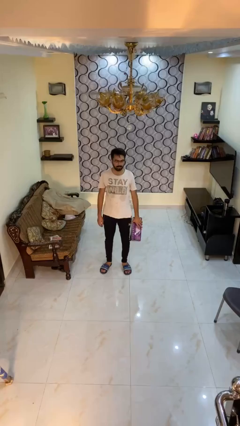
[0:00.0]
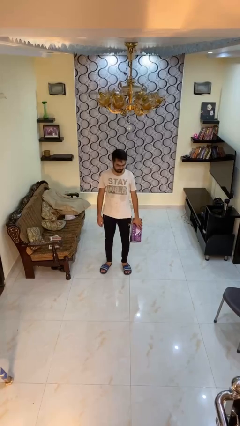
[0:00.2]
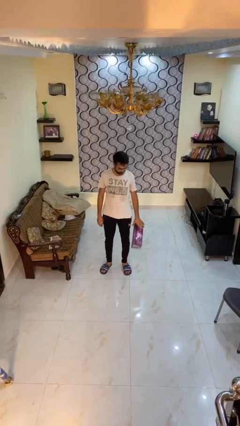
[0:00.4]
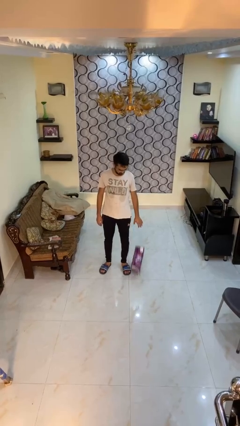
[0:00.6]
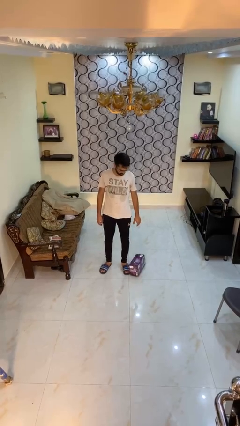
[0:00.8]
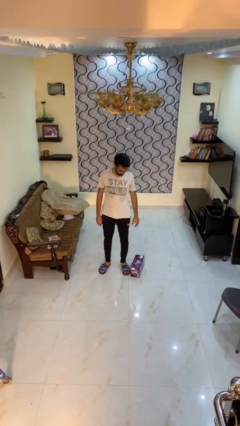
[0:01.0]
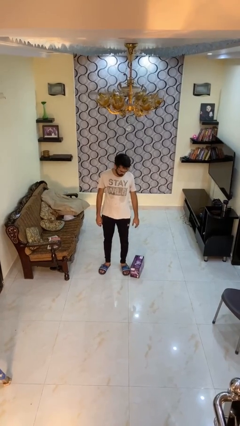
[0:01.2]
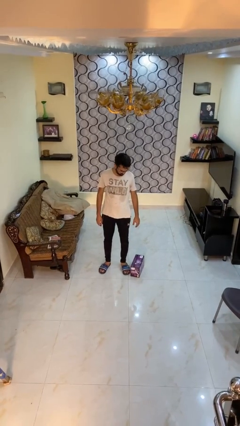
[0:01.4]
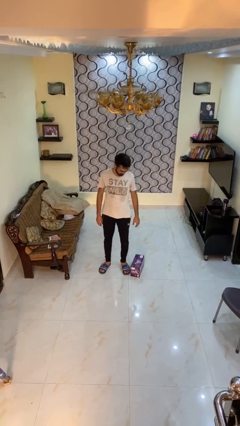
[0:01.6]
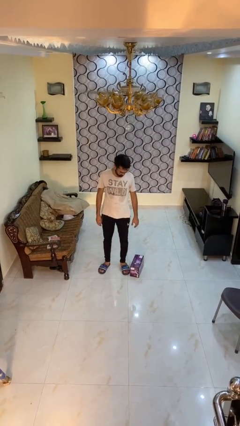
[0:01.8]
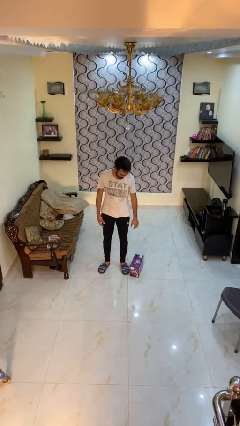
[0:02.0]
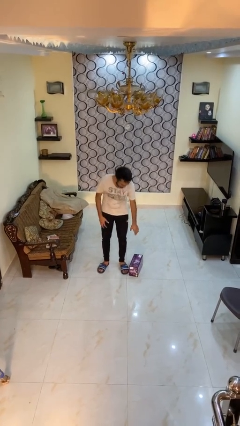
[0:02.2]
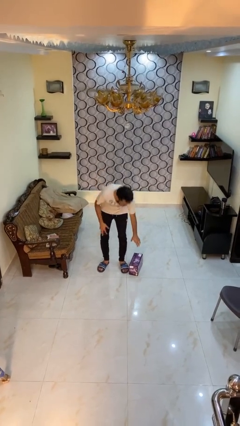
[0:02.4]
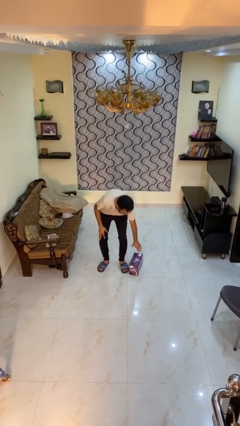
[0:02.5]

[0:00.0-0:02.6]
person drops object

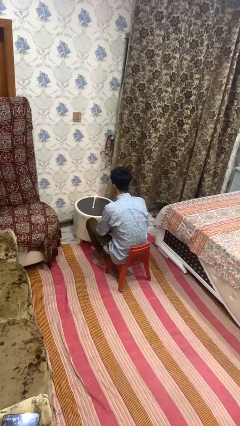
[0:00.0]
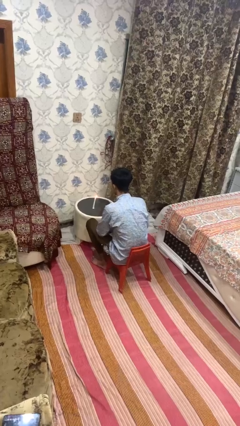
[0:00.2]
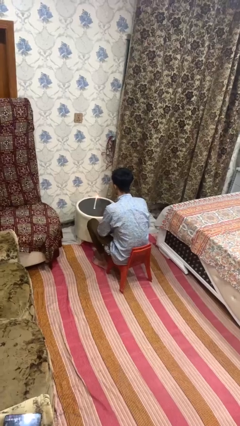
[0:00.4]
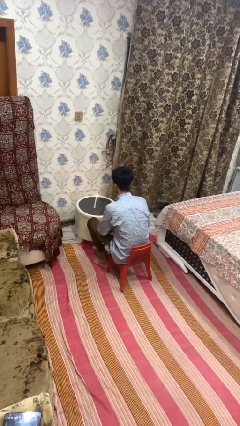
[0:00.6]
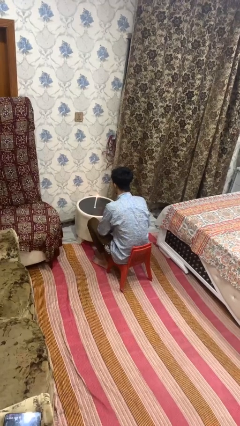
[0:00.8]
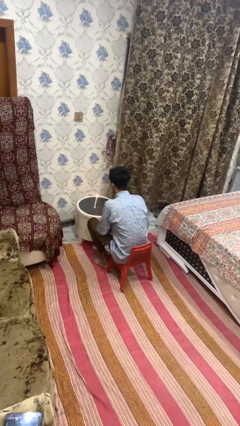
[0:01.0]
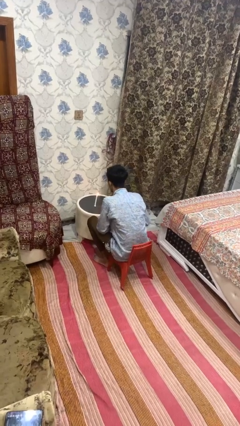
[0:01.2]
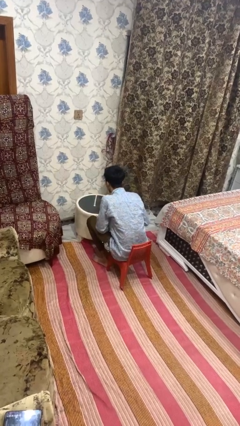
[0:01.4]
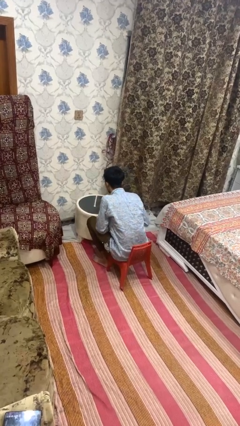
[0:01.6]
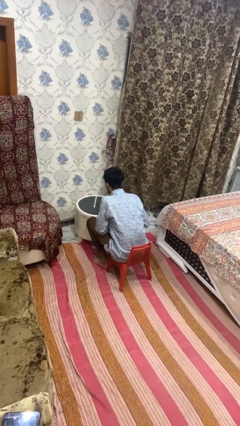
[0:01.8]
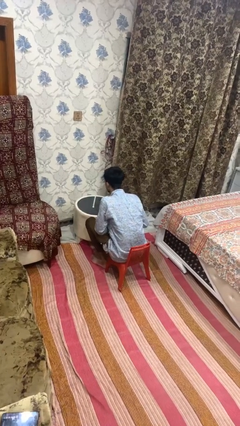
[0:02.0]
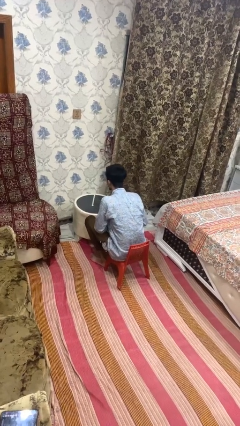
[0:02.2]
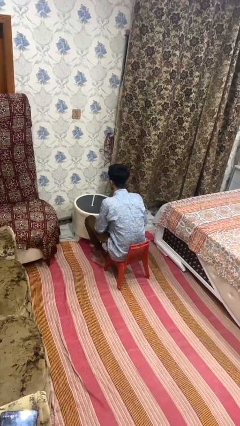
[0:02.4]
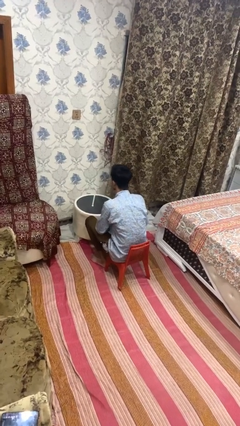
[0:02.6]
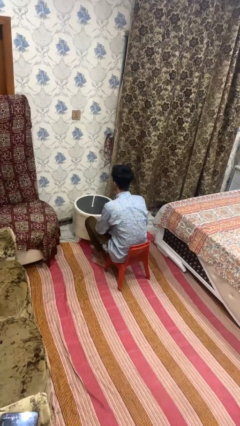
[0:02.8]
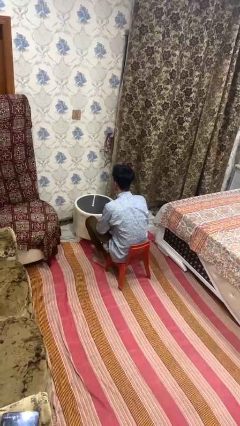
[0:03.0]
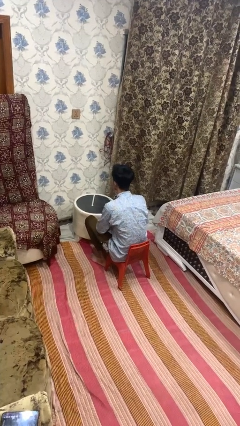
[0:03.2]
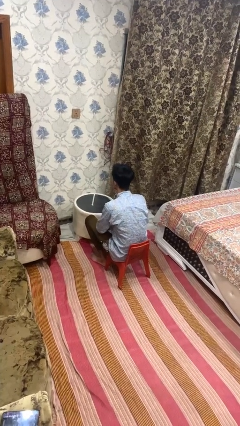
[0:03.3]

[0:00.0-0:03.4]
person extinguishes candle

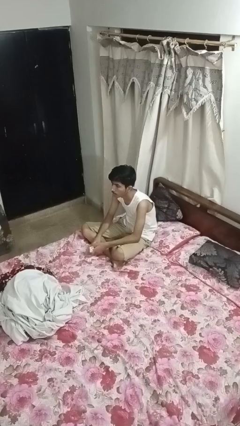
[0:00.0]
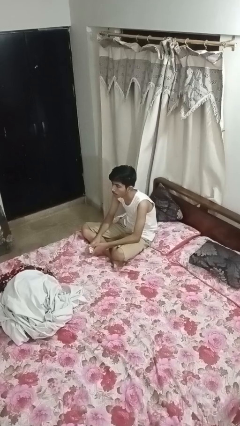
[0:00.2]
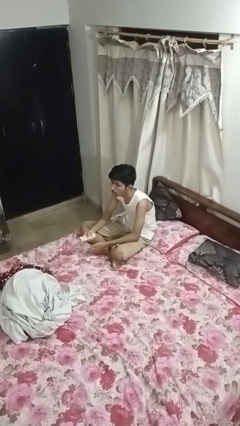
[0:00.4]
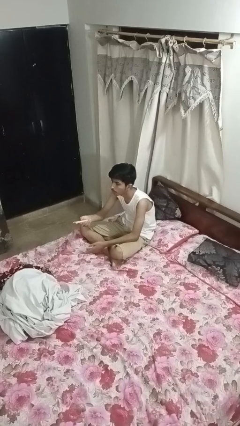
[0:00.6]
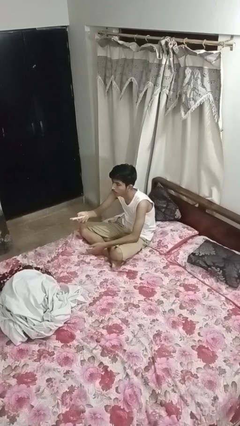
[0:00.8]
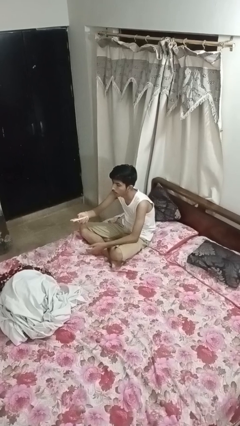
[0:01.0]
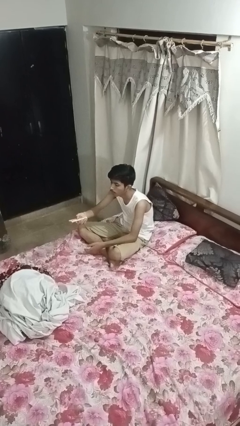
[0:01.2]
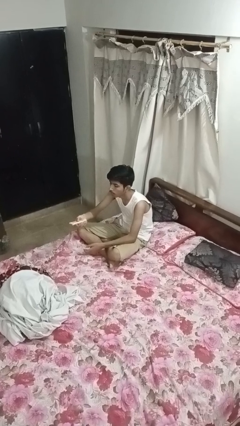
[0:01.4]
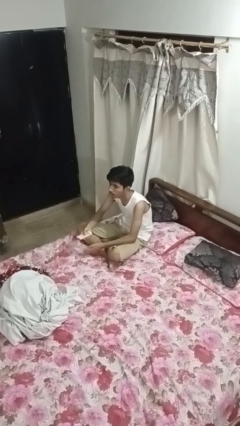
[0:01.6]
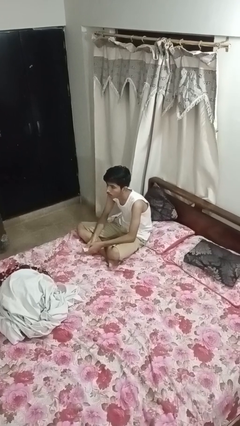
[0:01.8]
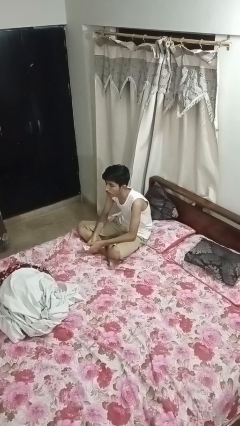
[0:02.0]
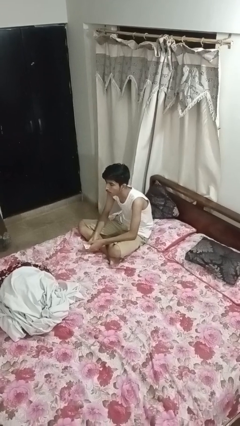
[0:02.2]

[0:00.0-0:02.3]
person uses television remote

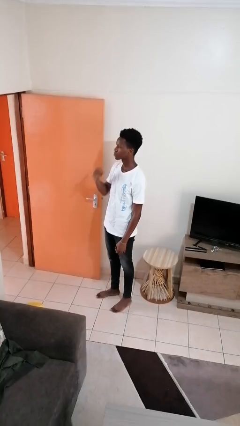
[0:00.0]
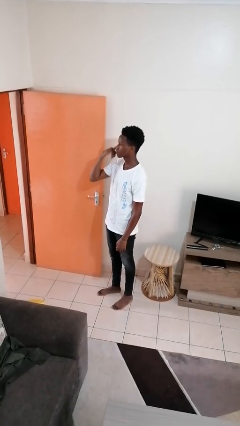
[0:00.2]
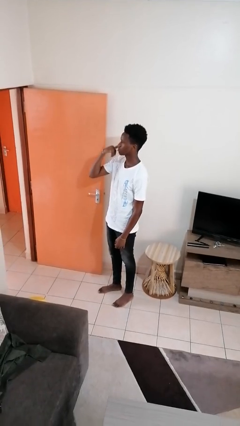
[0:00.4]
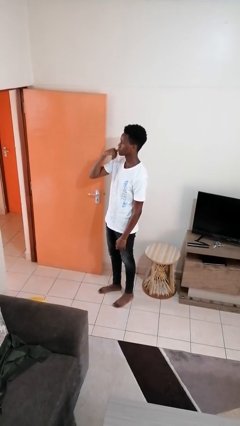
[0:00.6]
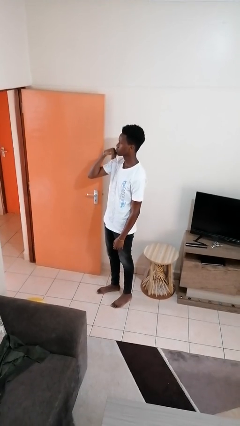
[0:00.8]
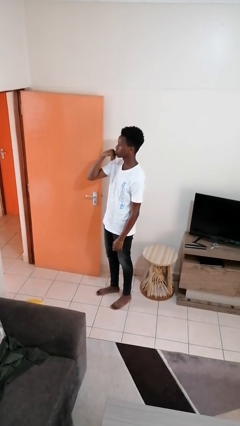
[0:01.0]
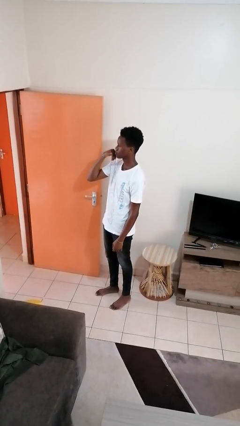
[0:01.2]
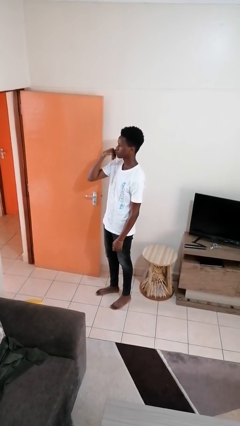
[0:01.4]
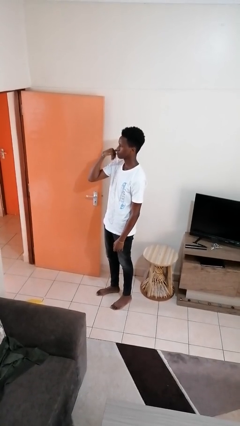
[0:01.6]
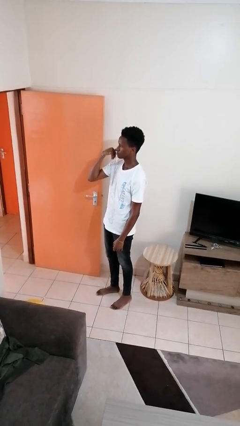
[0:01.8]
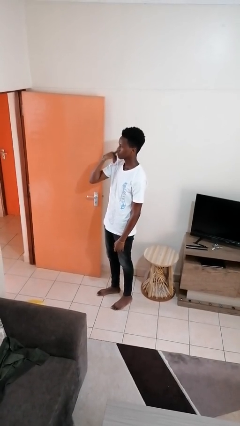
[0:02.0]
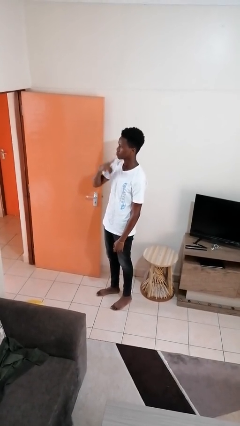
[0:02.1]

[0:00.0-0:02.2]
person gestures call me

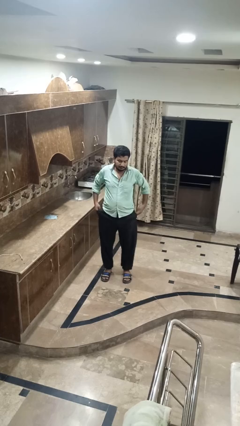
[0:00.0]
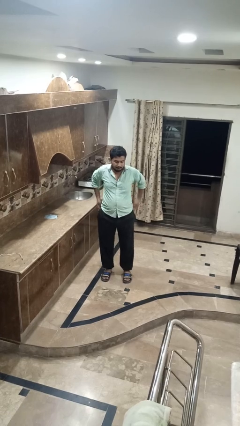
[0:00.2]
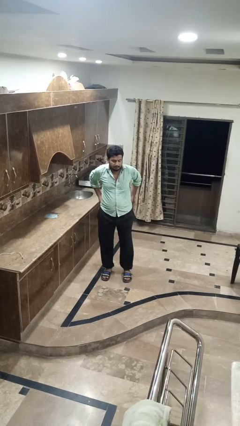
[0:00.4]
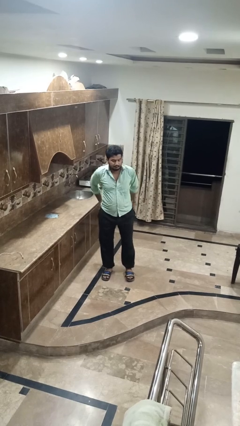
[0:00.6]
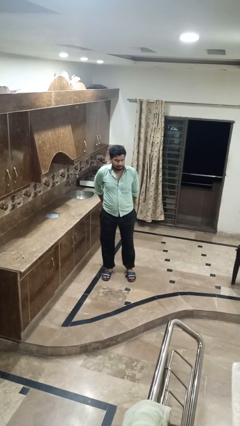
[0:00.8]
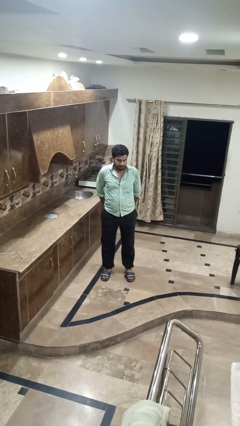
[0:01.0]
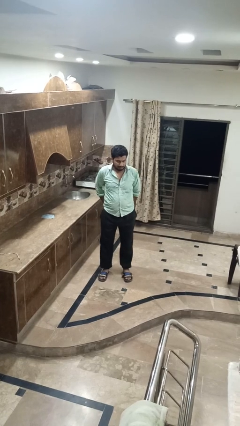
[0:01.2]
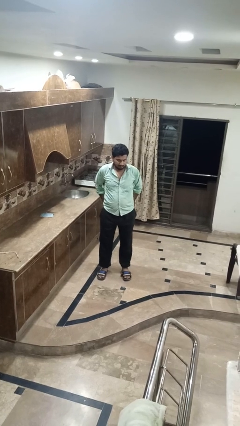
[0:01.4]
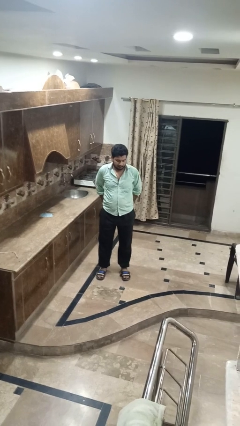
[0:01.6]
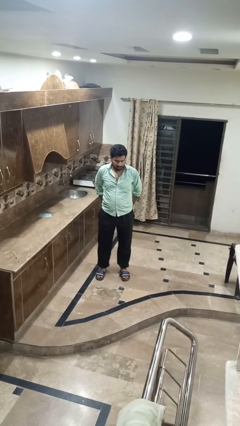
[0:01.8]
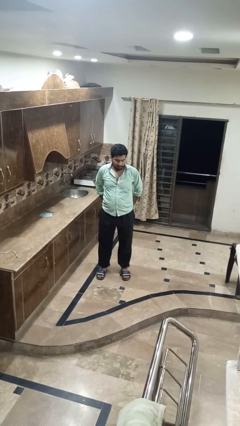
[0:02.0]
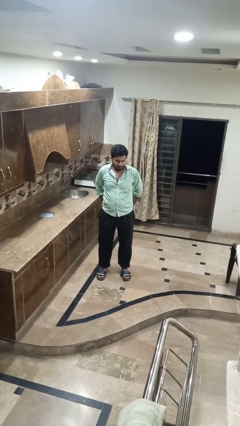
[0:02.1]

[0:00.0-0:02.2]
person puts hands in back pockets

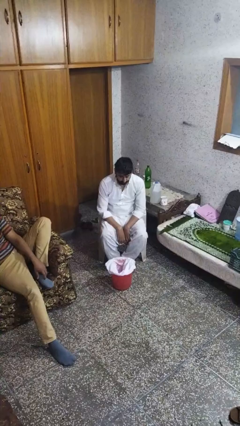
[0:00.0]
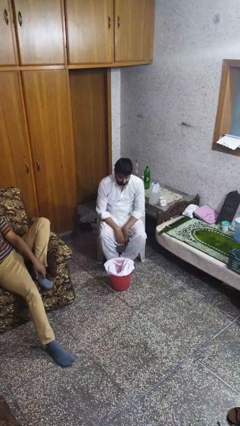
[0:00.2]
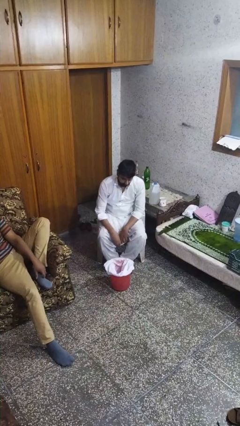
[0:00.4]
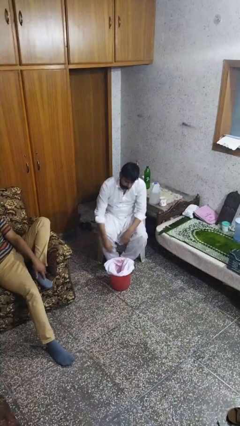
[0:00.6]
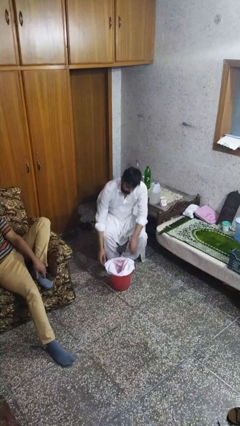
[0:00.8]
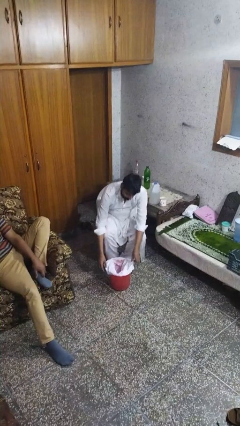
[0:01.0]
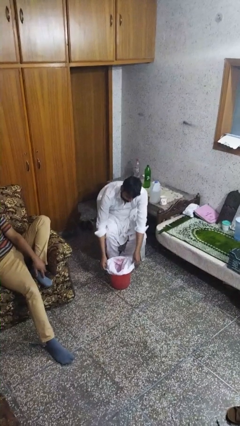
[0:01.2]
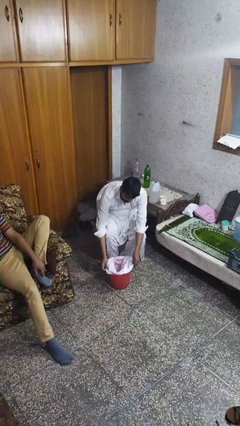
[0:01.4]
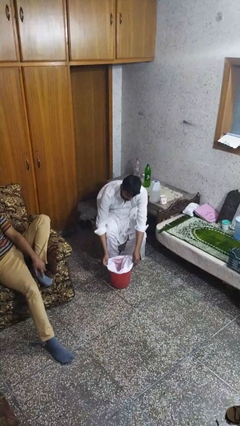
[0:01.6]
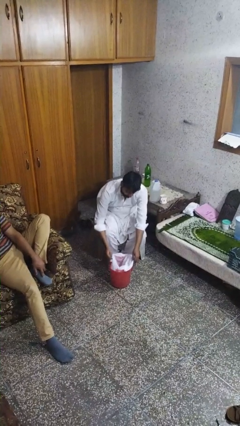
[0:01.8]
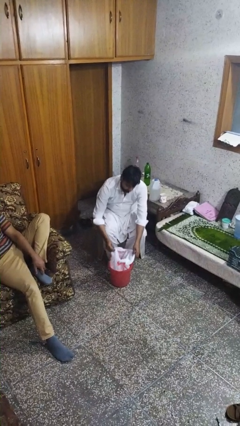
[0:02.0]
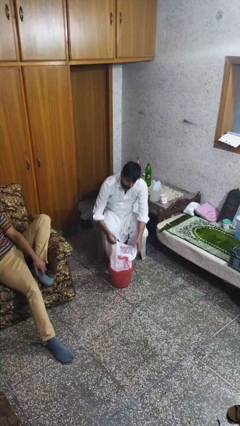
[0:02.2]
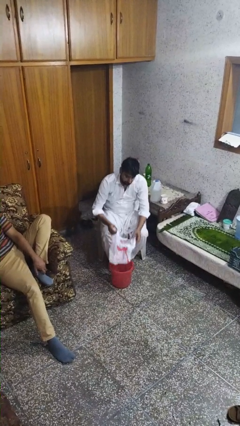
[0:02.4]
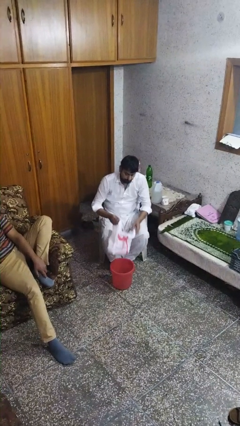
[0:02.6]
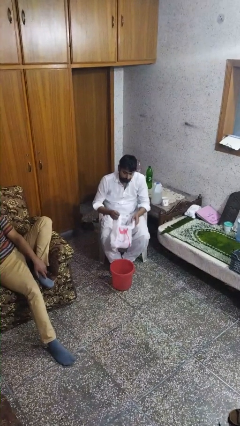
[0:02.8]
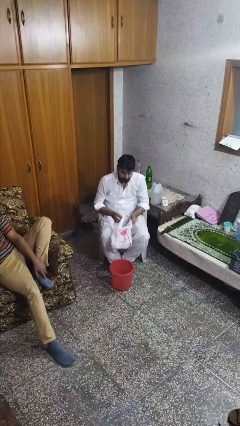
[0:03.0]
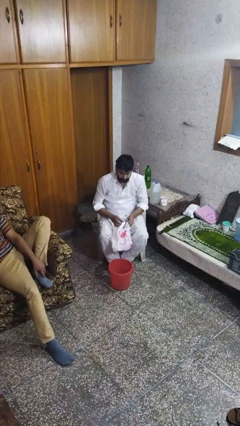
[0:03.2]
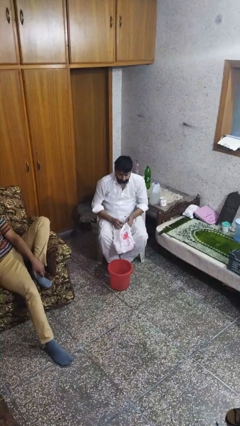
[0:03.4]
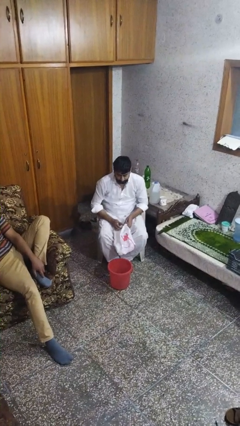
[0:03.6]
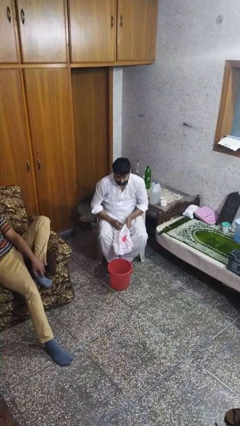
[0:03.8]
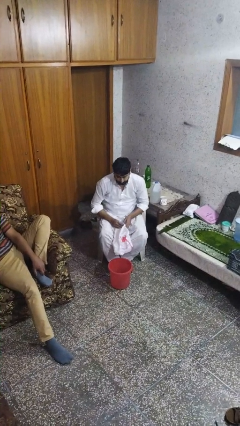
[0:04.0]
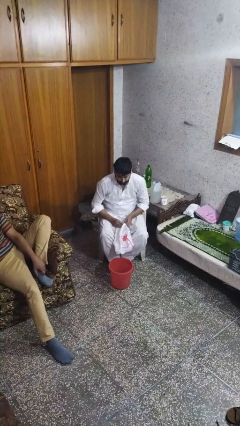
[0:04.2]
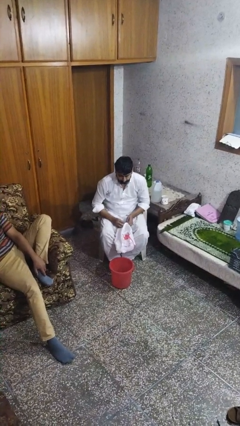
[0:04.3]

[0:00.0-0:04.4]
person removes trashbag from trashcan

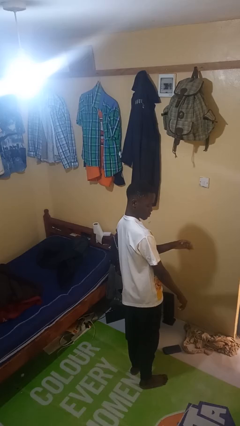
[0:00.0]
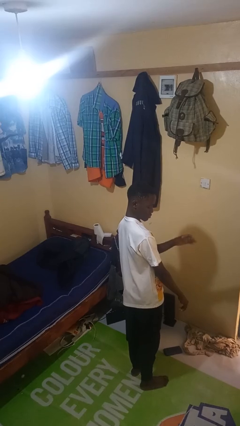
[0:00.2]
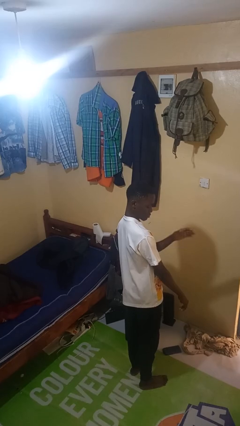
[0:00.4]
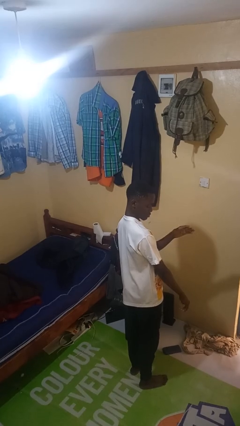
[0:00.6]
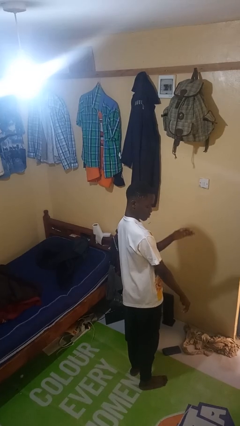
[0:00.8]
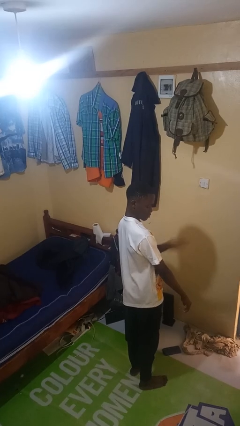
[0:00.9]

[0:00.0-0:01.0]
person swats bug
